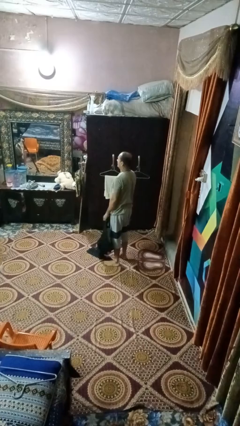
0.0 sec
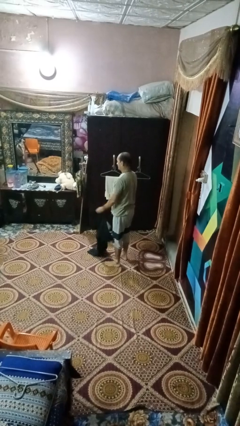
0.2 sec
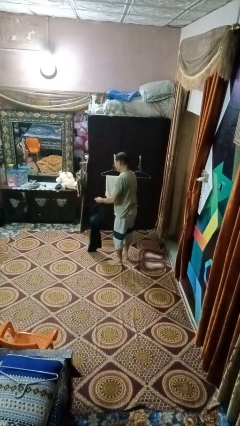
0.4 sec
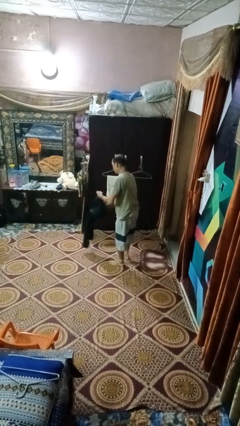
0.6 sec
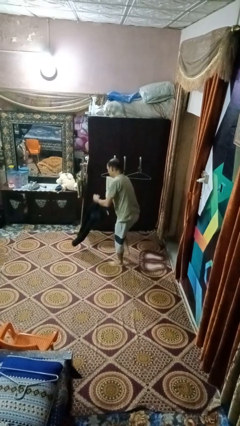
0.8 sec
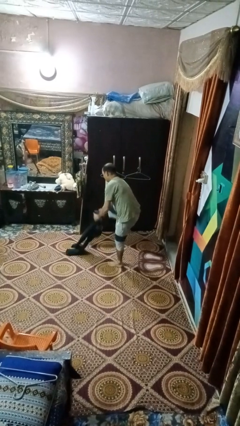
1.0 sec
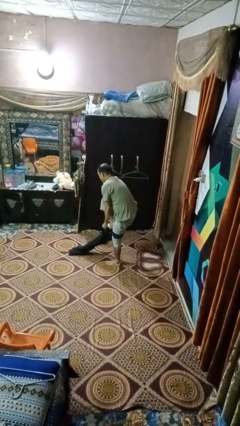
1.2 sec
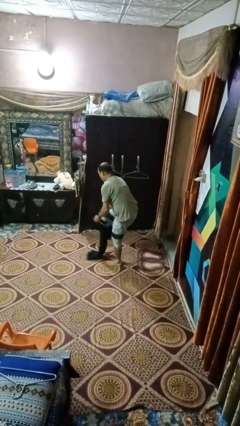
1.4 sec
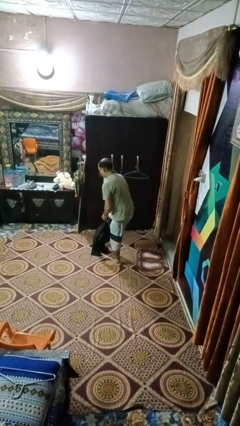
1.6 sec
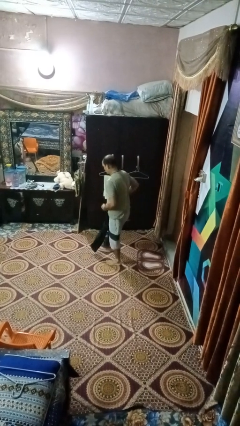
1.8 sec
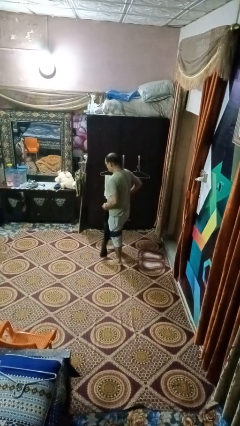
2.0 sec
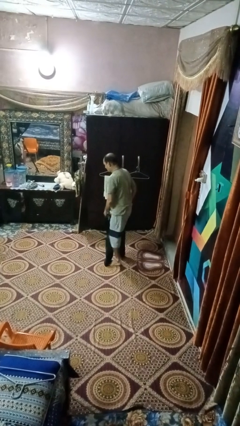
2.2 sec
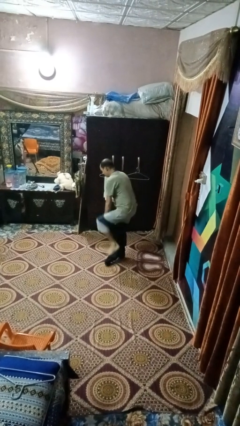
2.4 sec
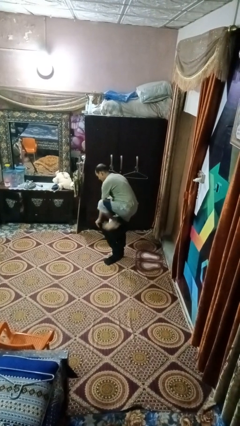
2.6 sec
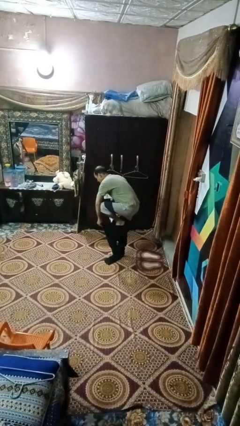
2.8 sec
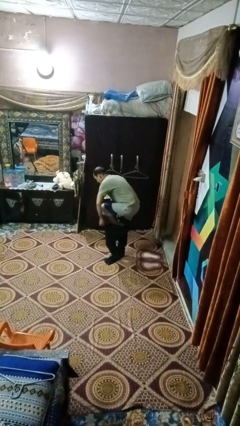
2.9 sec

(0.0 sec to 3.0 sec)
person puts on pants

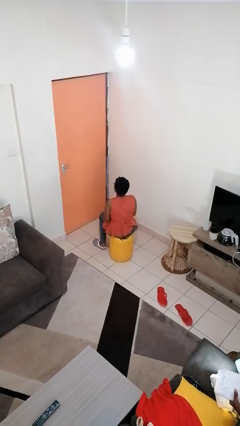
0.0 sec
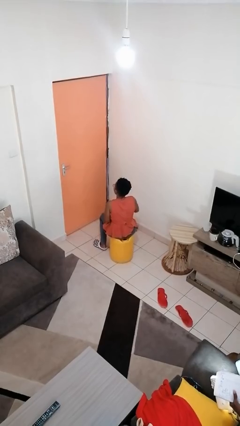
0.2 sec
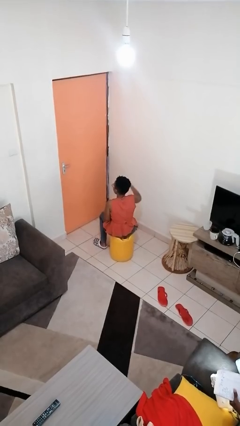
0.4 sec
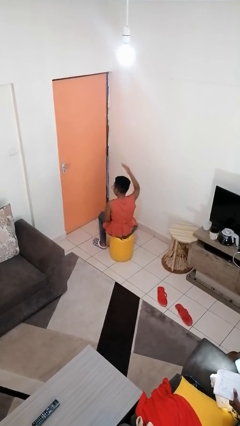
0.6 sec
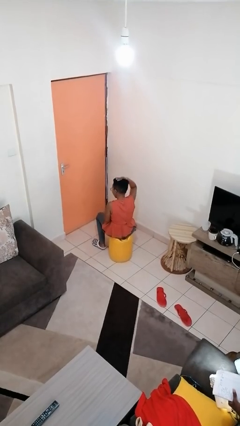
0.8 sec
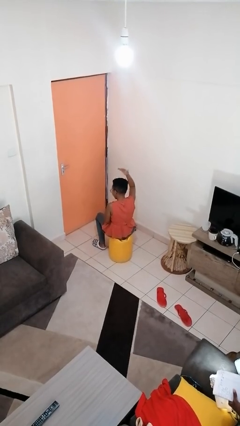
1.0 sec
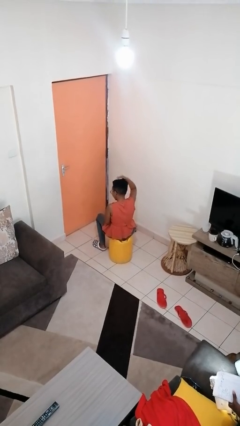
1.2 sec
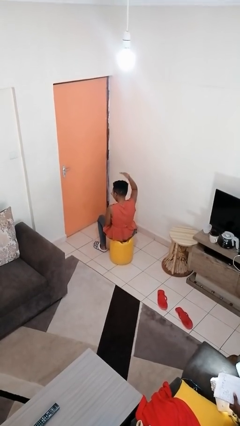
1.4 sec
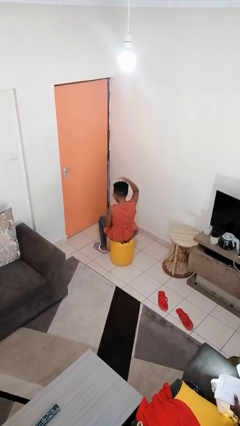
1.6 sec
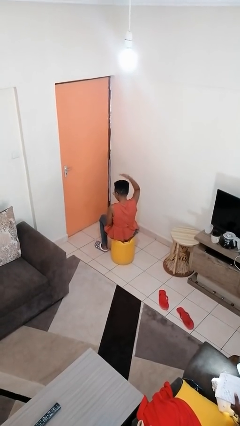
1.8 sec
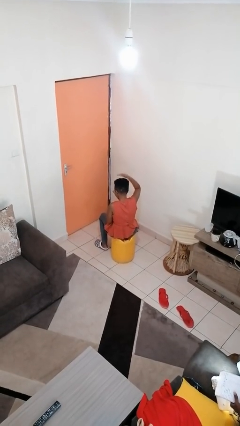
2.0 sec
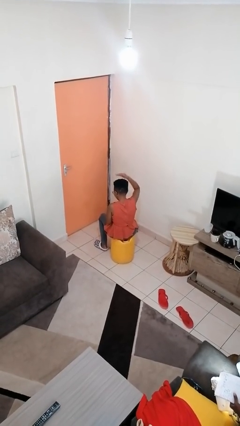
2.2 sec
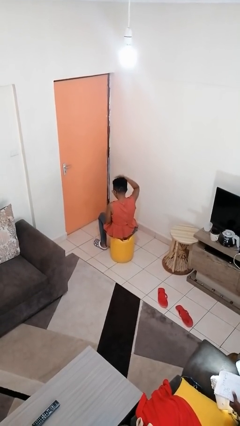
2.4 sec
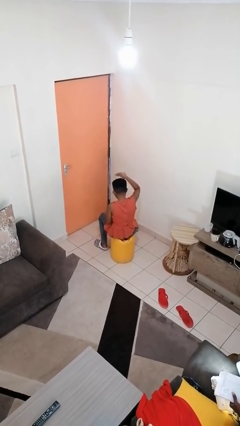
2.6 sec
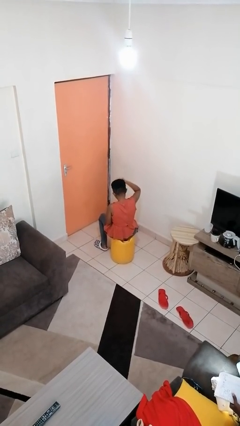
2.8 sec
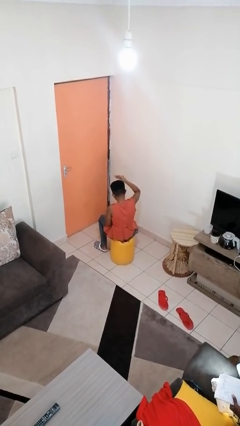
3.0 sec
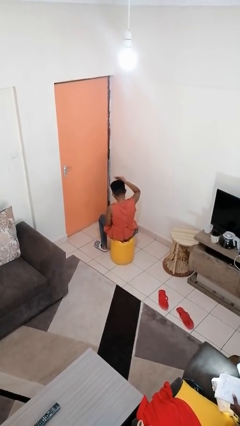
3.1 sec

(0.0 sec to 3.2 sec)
person pats head

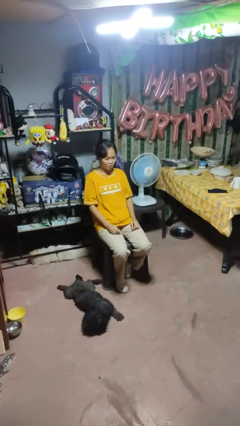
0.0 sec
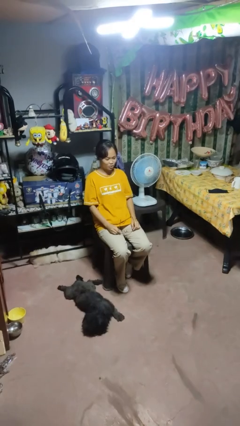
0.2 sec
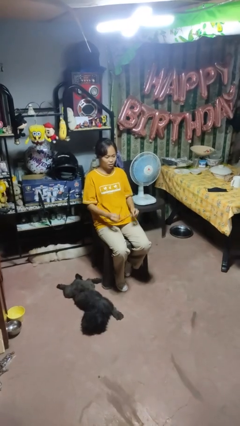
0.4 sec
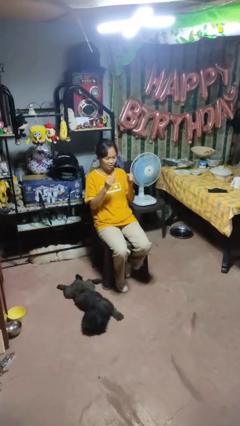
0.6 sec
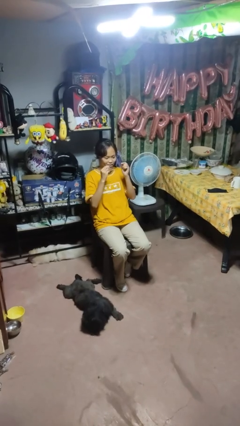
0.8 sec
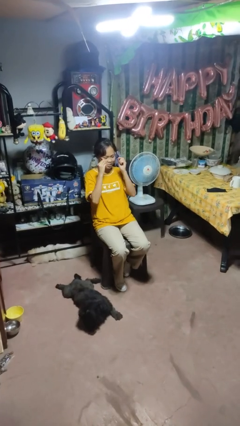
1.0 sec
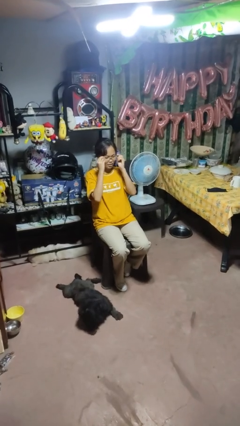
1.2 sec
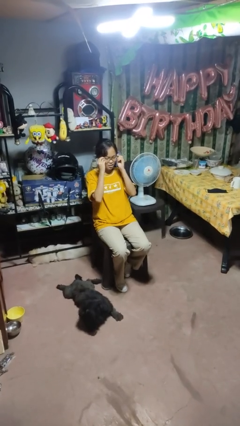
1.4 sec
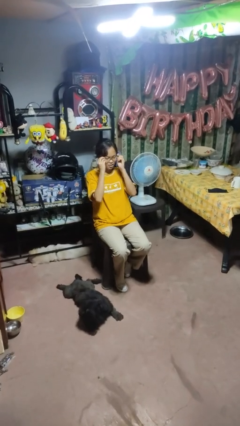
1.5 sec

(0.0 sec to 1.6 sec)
person puts on glasses

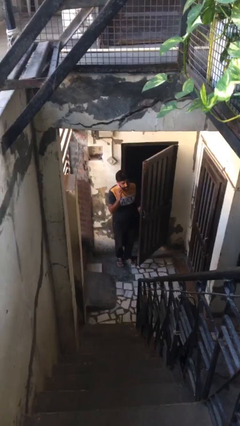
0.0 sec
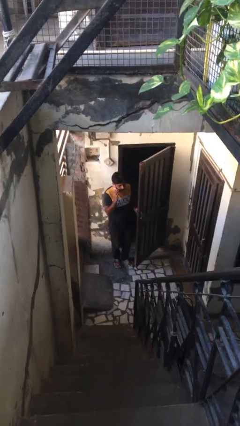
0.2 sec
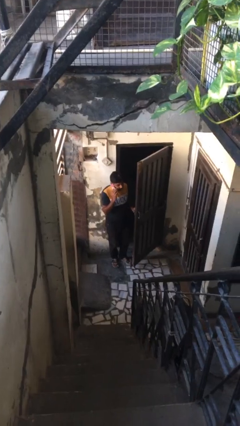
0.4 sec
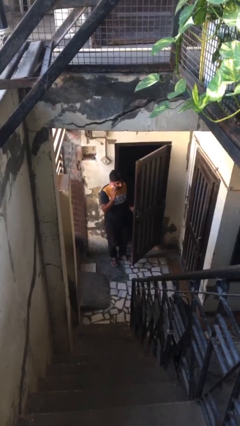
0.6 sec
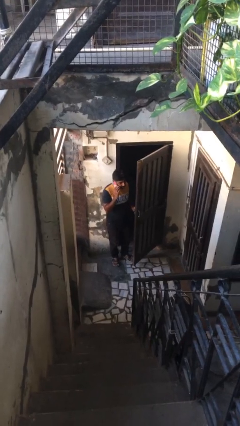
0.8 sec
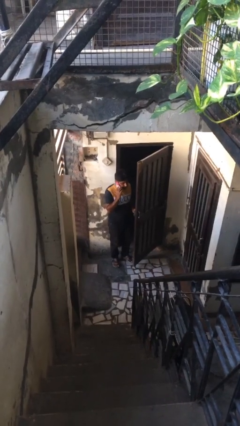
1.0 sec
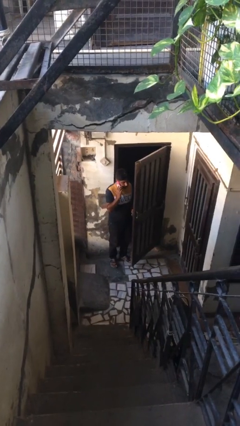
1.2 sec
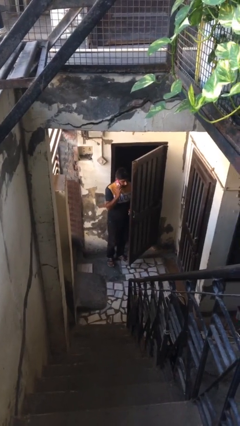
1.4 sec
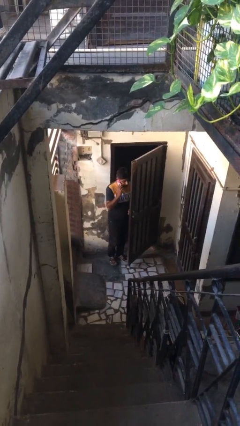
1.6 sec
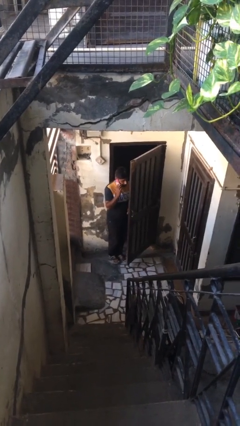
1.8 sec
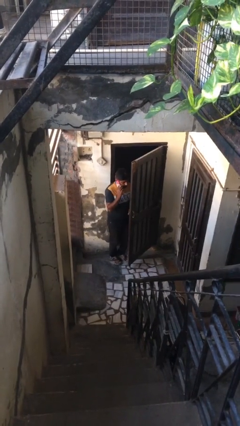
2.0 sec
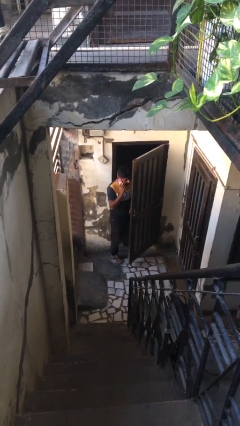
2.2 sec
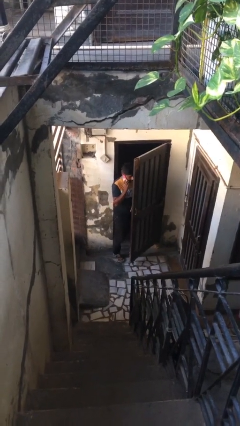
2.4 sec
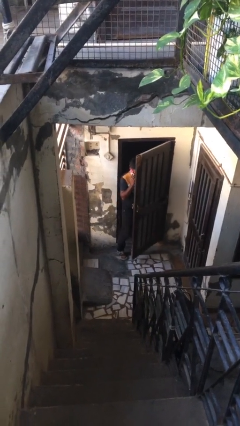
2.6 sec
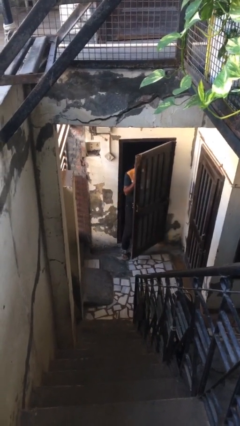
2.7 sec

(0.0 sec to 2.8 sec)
person exits scene through structure

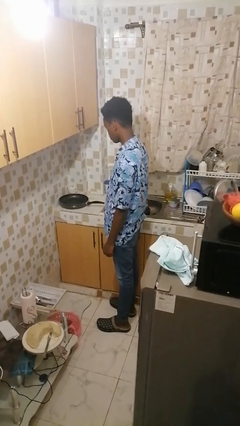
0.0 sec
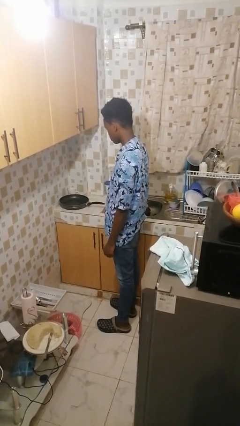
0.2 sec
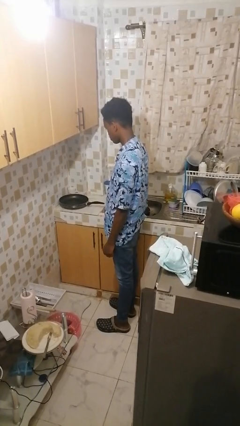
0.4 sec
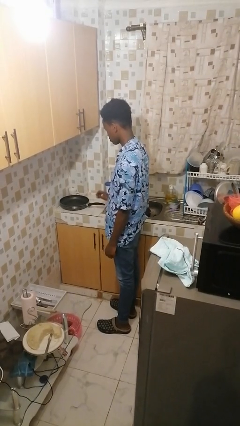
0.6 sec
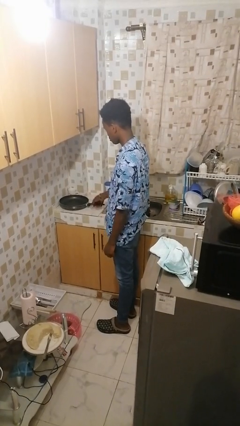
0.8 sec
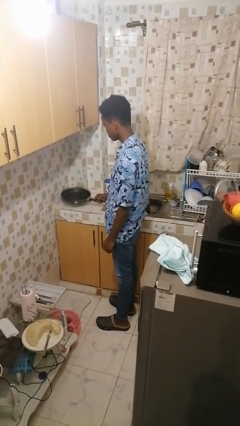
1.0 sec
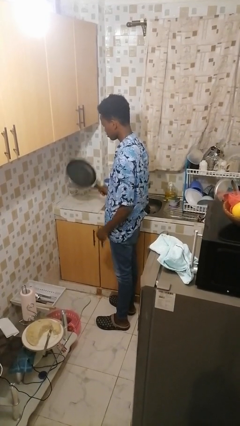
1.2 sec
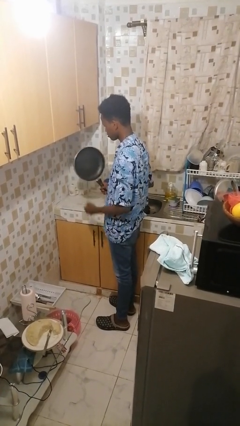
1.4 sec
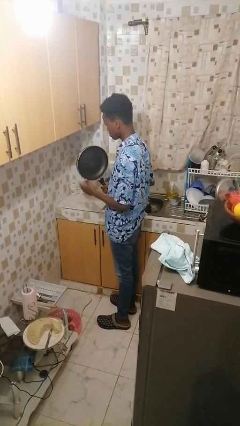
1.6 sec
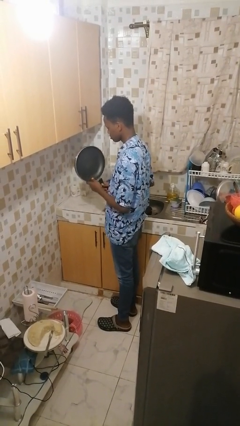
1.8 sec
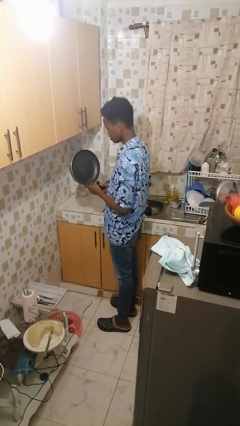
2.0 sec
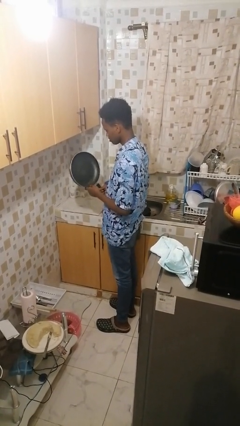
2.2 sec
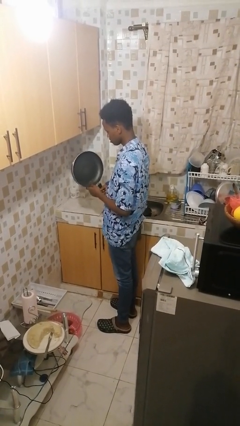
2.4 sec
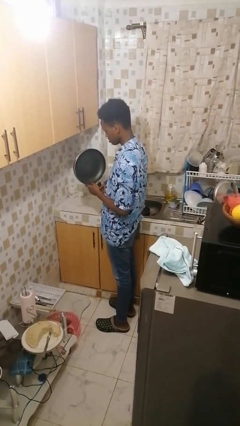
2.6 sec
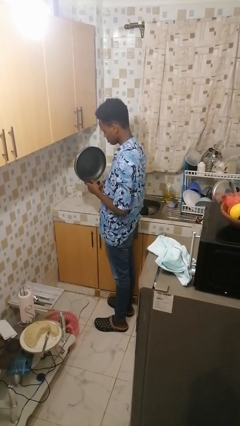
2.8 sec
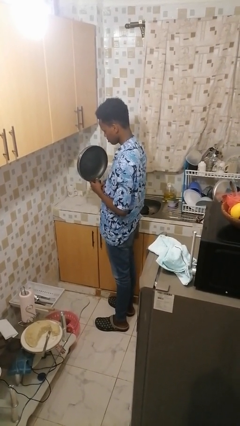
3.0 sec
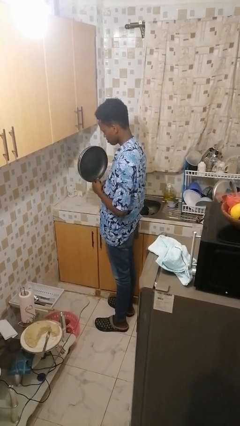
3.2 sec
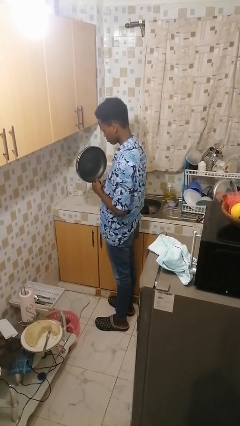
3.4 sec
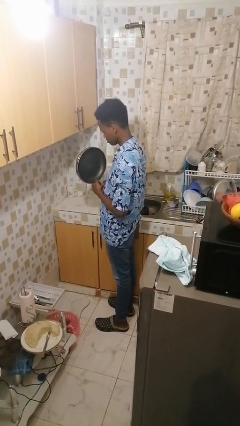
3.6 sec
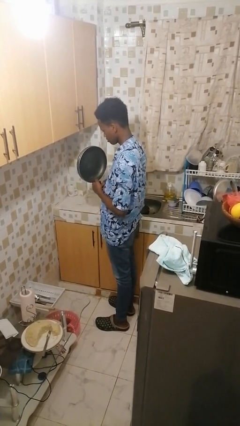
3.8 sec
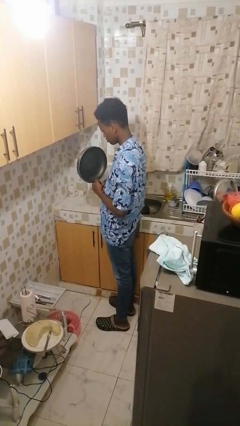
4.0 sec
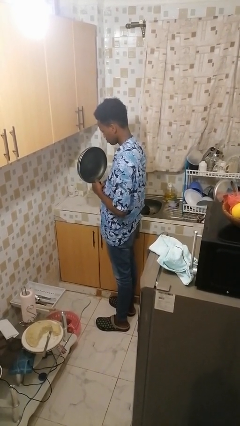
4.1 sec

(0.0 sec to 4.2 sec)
person picks up object from countertop

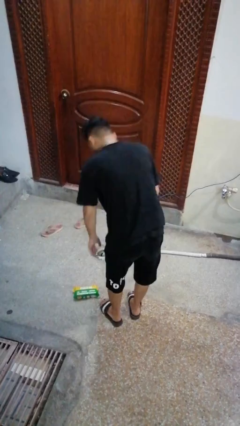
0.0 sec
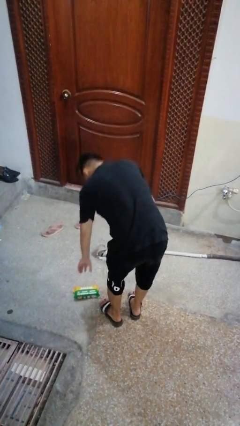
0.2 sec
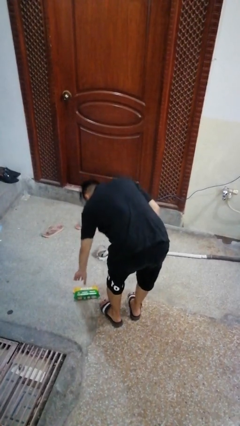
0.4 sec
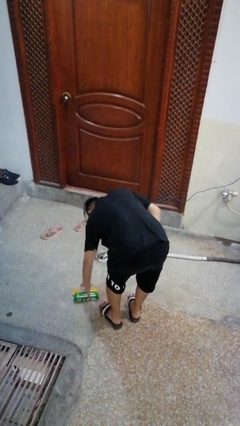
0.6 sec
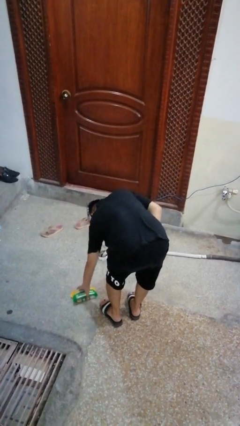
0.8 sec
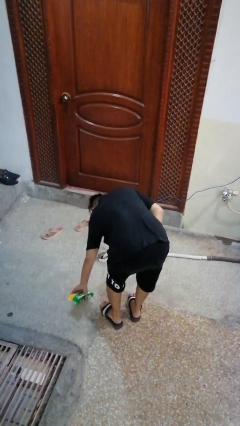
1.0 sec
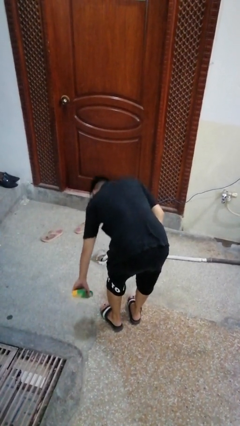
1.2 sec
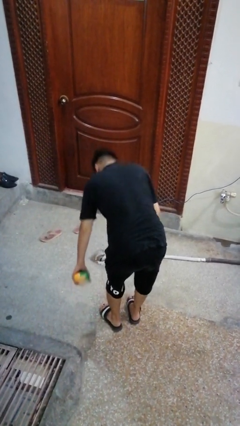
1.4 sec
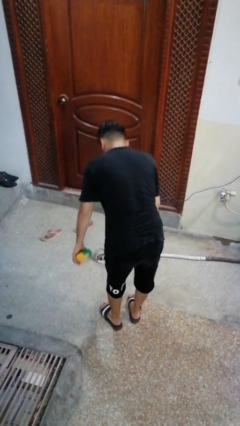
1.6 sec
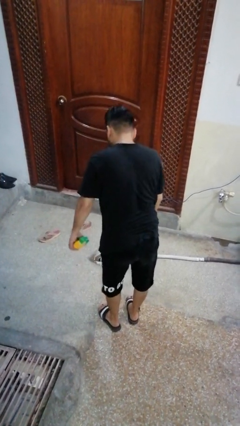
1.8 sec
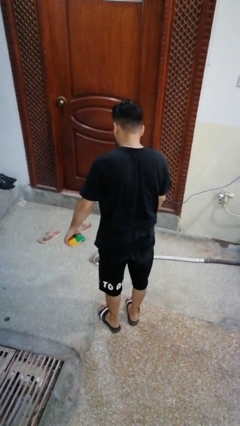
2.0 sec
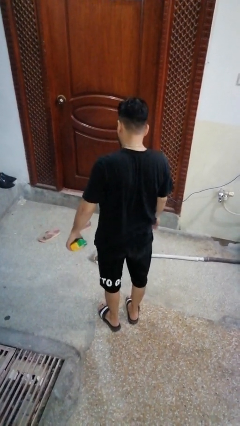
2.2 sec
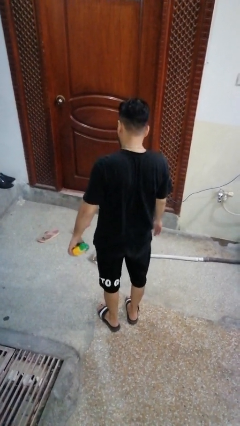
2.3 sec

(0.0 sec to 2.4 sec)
person picks up object from floor

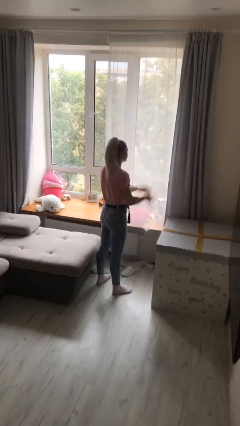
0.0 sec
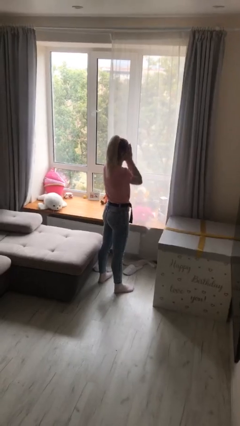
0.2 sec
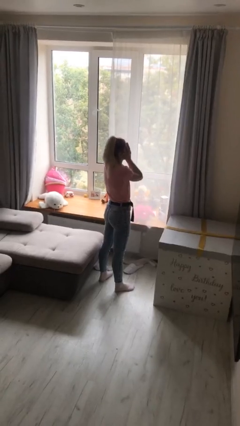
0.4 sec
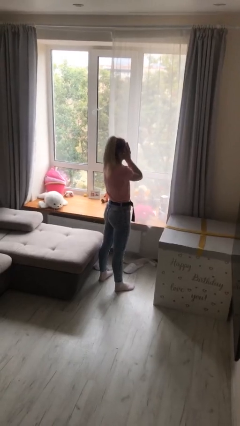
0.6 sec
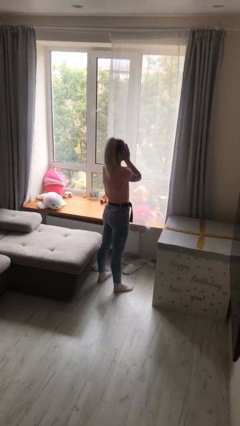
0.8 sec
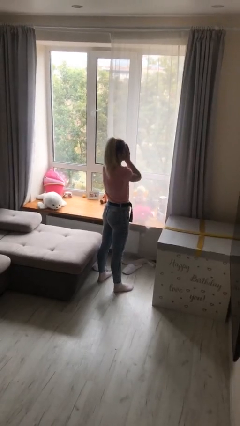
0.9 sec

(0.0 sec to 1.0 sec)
person covers face with hands
